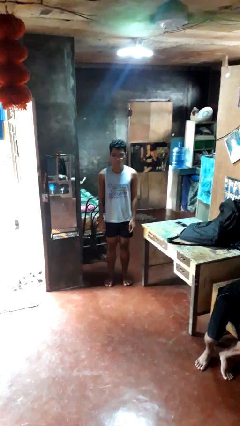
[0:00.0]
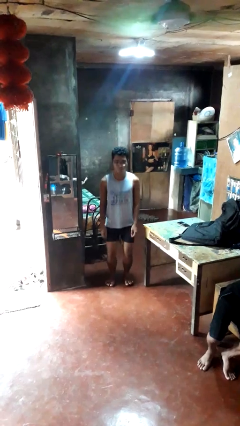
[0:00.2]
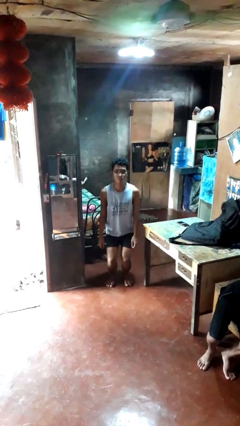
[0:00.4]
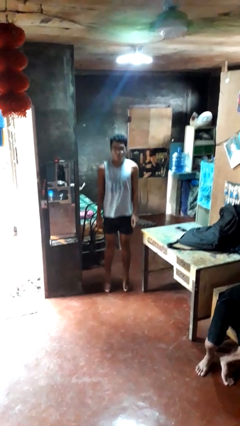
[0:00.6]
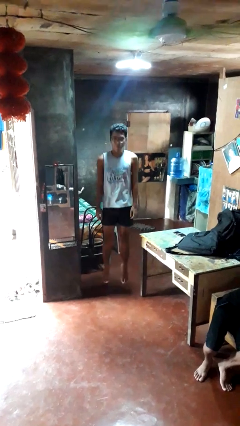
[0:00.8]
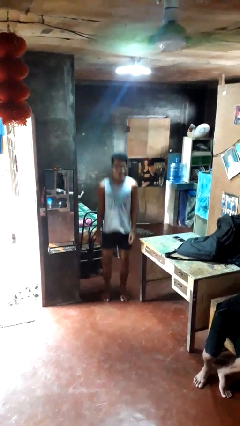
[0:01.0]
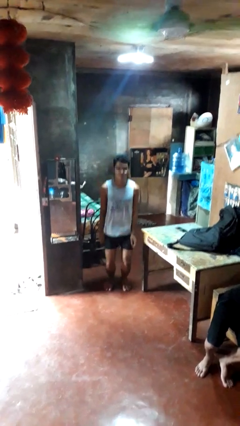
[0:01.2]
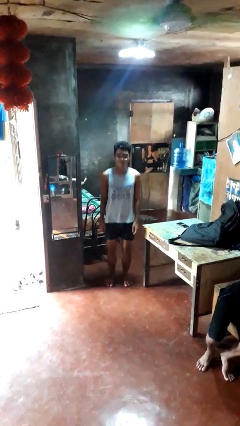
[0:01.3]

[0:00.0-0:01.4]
person jumps

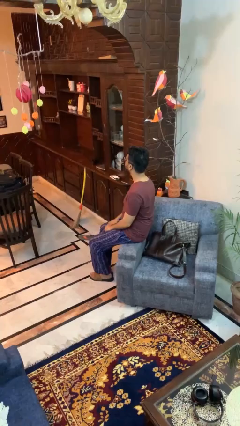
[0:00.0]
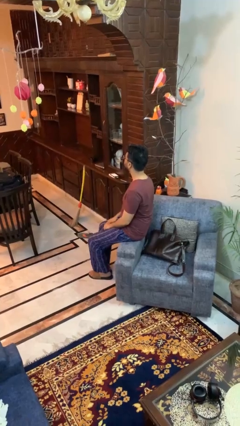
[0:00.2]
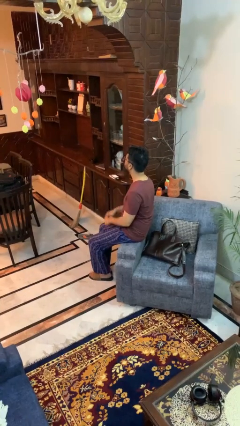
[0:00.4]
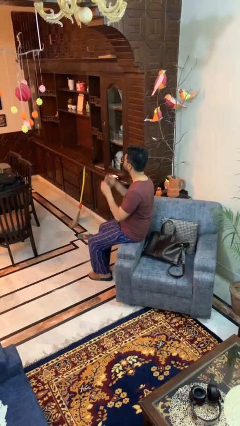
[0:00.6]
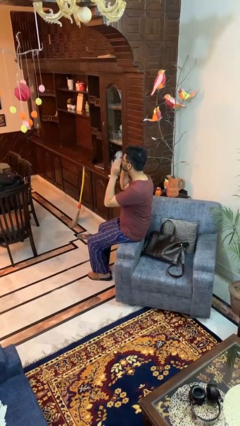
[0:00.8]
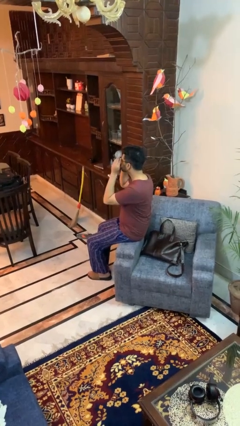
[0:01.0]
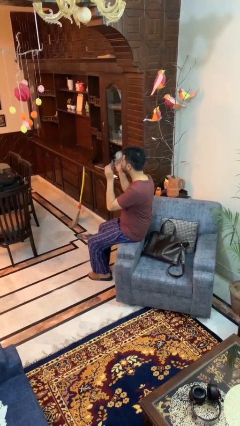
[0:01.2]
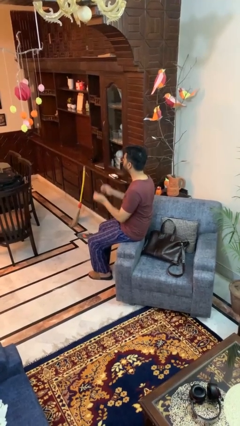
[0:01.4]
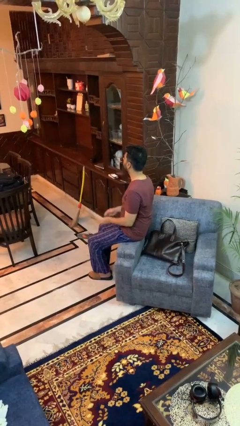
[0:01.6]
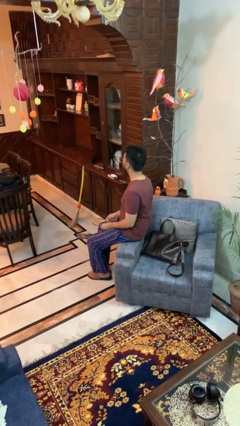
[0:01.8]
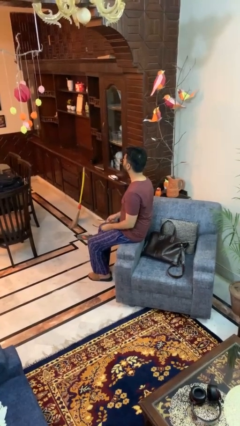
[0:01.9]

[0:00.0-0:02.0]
person takes off glasses

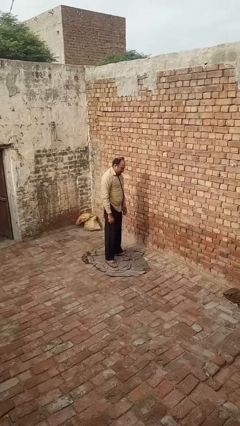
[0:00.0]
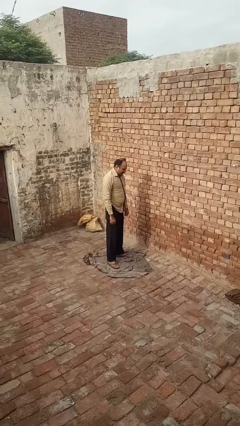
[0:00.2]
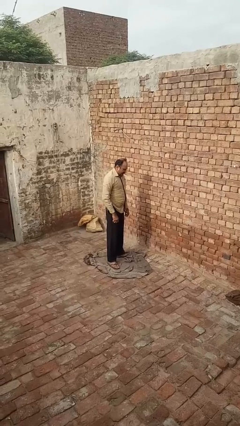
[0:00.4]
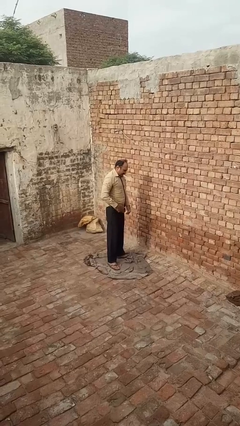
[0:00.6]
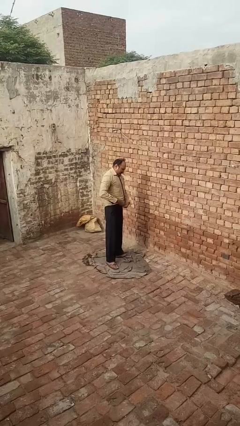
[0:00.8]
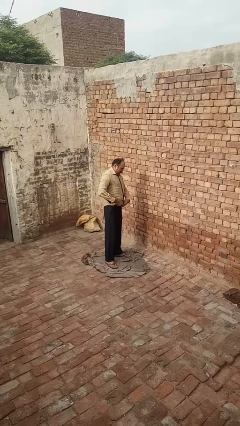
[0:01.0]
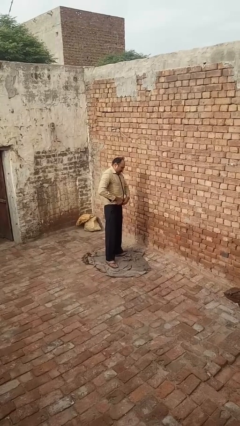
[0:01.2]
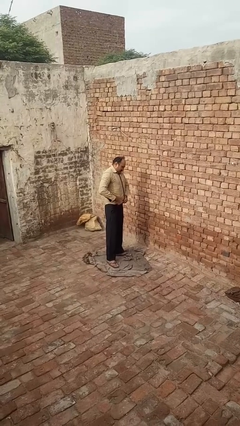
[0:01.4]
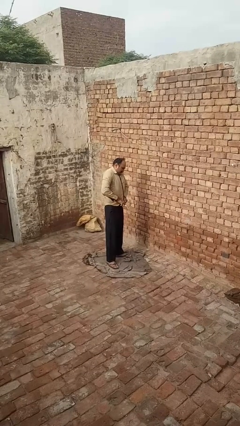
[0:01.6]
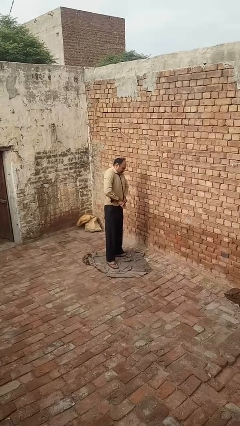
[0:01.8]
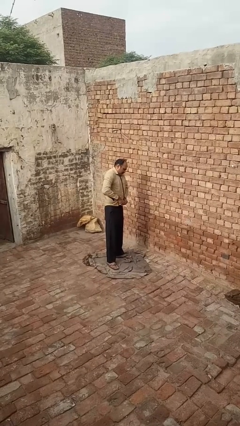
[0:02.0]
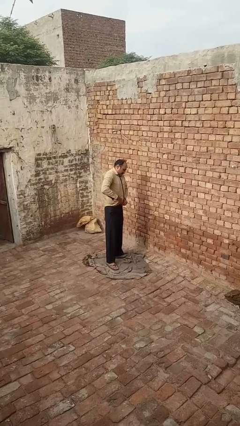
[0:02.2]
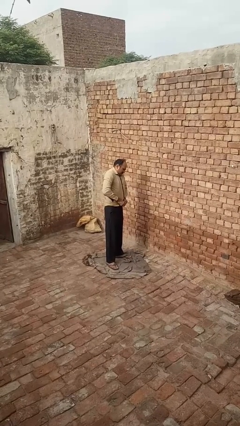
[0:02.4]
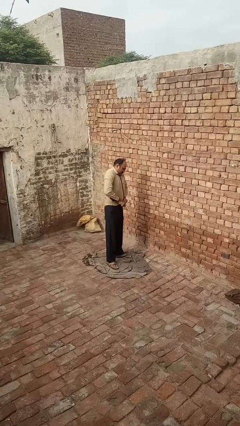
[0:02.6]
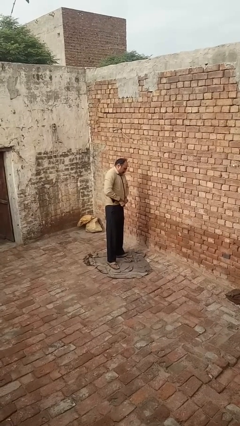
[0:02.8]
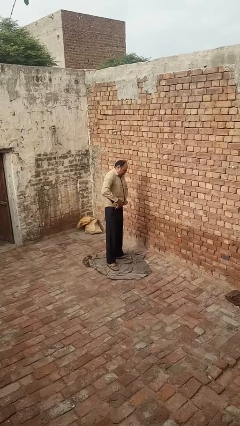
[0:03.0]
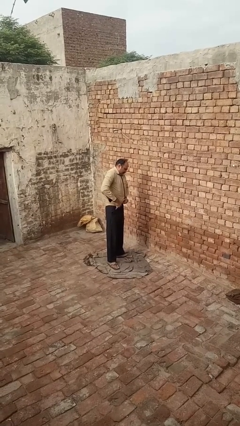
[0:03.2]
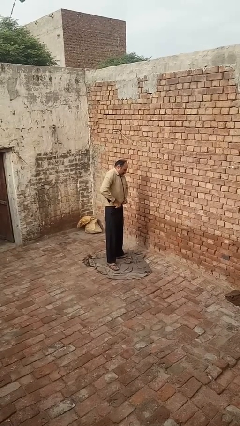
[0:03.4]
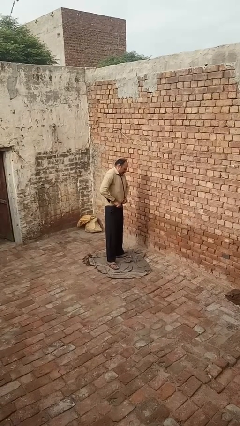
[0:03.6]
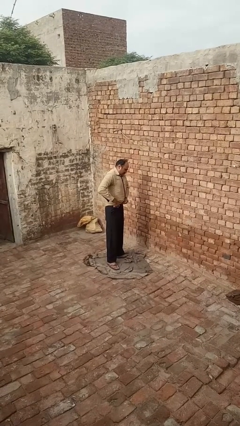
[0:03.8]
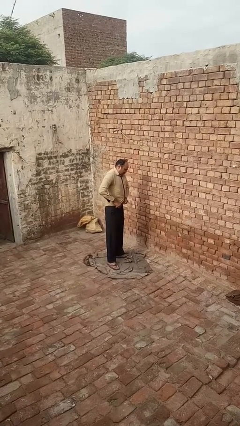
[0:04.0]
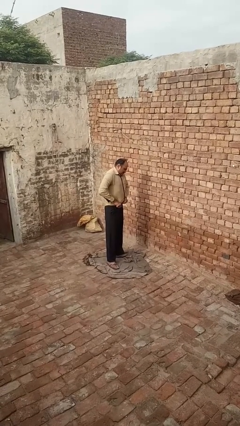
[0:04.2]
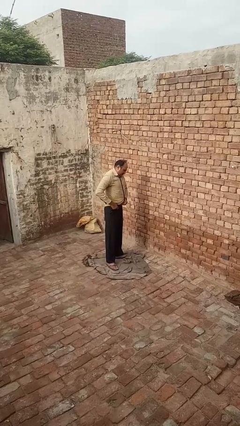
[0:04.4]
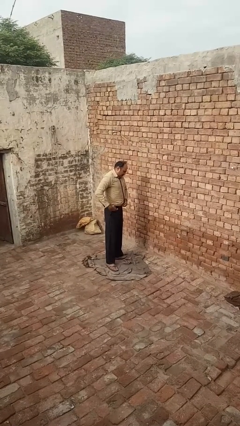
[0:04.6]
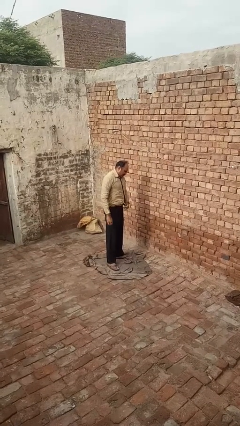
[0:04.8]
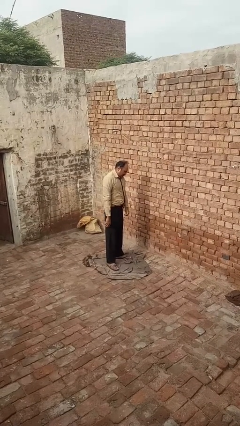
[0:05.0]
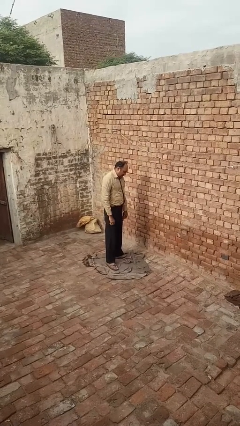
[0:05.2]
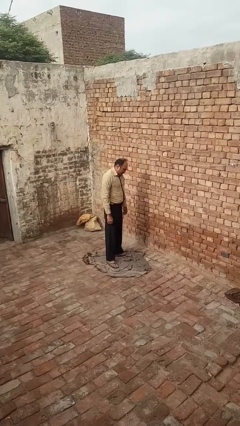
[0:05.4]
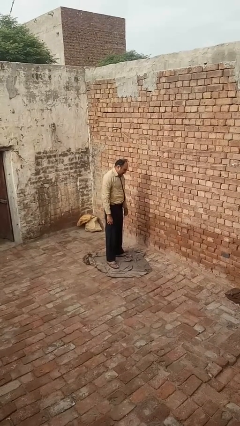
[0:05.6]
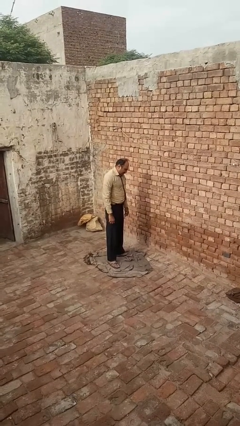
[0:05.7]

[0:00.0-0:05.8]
person tucks in shirt

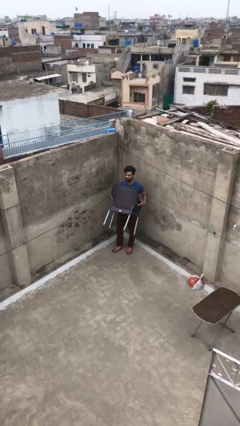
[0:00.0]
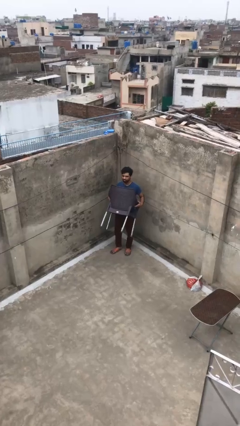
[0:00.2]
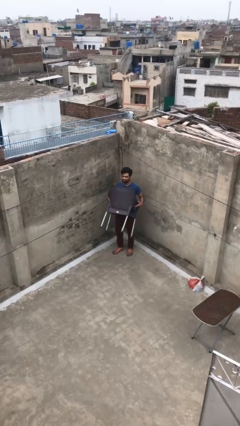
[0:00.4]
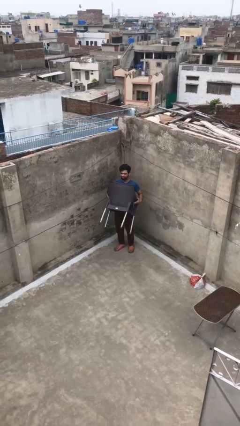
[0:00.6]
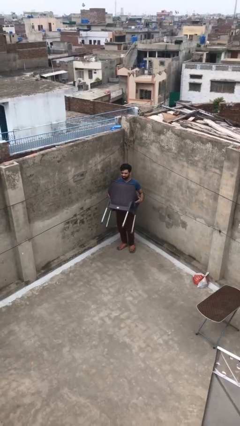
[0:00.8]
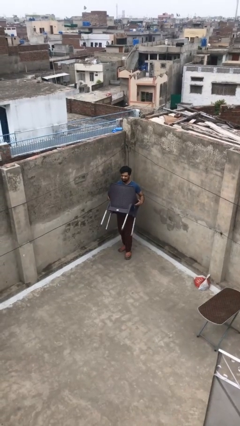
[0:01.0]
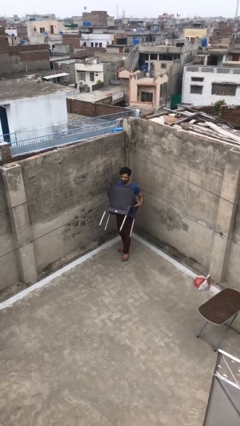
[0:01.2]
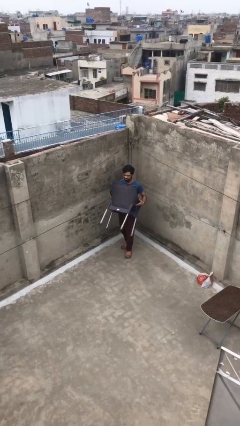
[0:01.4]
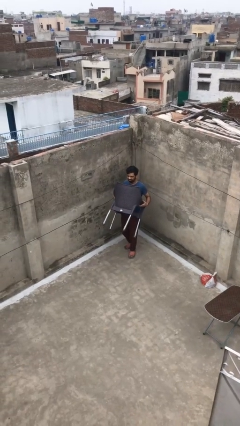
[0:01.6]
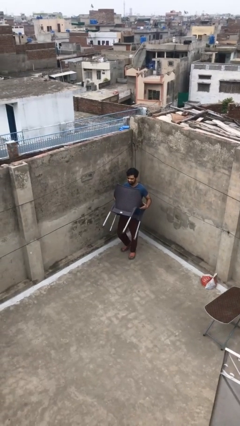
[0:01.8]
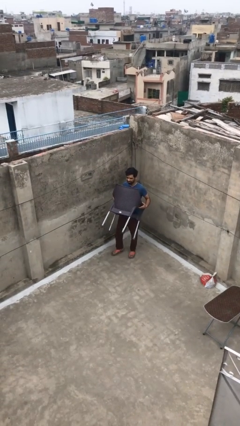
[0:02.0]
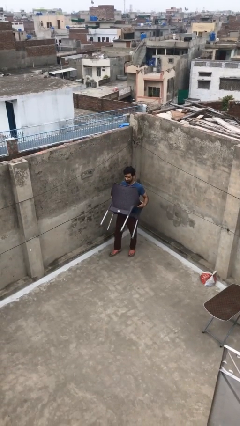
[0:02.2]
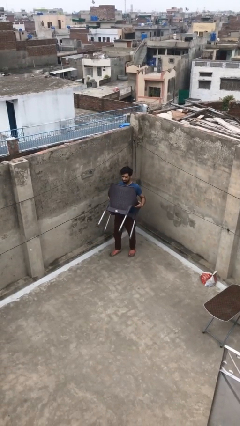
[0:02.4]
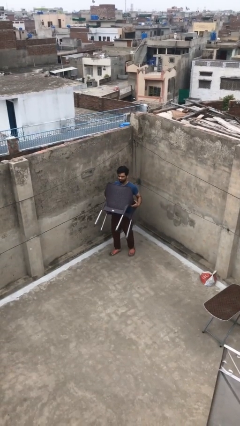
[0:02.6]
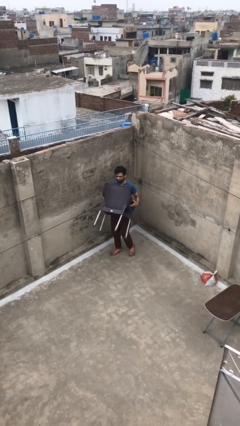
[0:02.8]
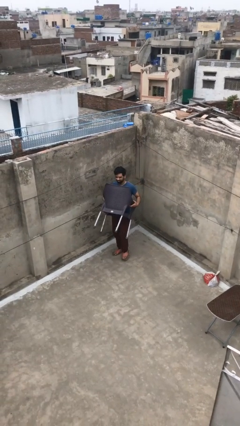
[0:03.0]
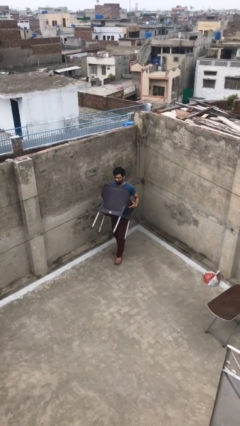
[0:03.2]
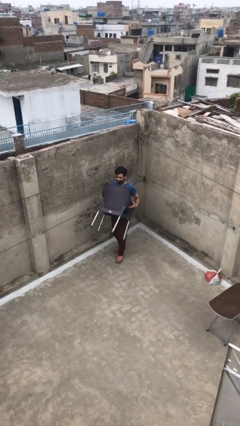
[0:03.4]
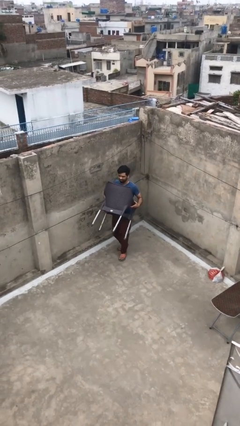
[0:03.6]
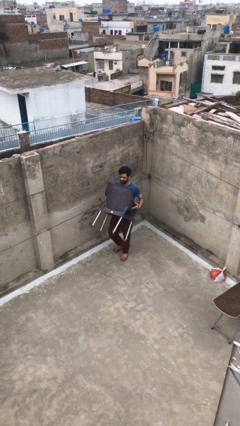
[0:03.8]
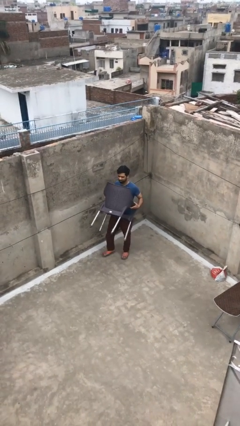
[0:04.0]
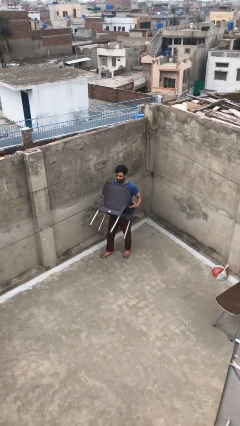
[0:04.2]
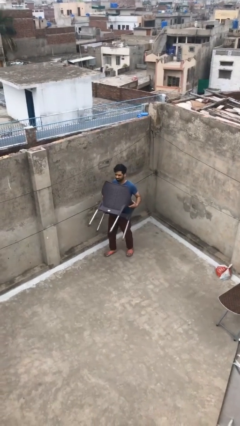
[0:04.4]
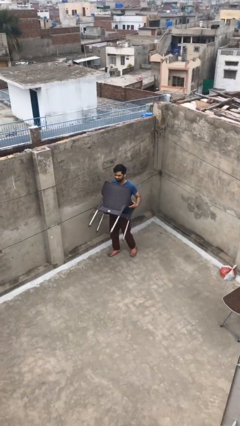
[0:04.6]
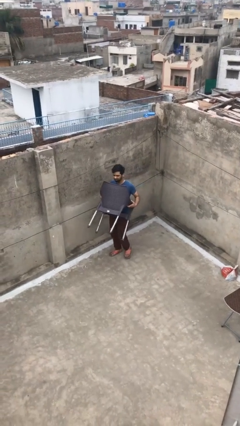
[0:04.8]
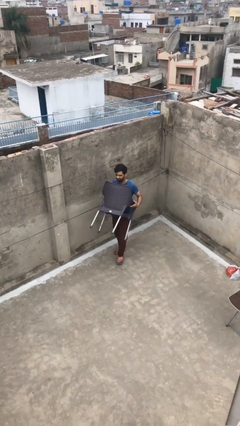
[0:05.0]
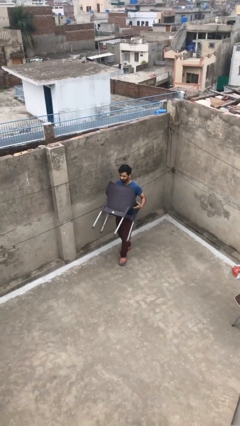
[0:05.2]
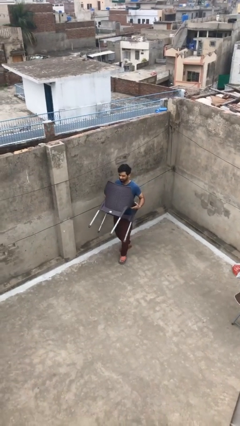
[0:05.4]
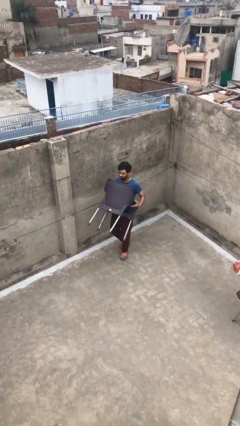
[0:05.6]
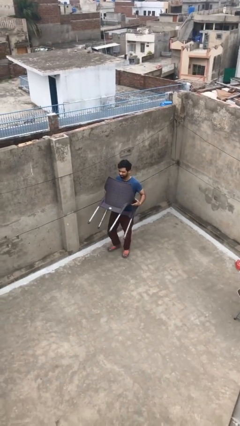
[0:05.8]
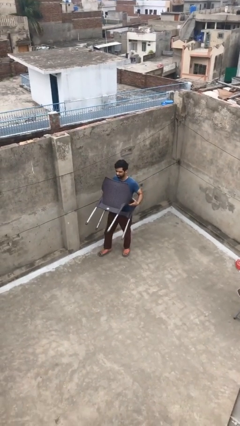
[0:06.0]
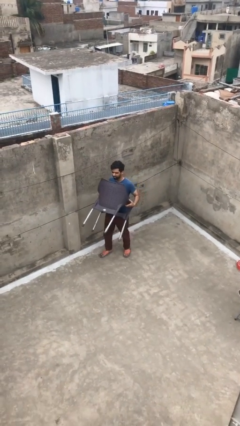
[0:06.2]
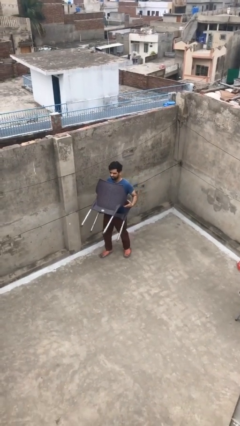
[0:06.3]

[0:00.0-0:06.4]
person carries heavy object

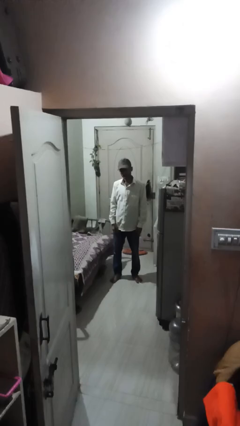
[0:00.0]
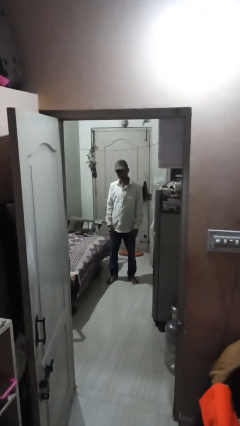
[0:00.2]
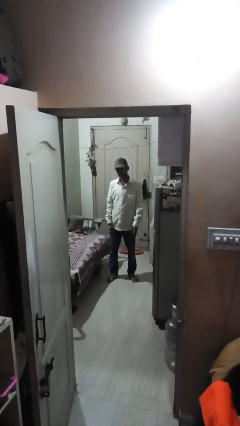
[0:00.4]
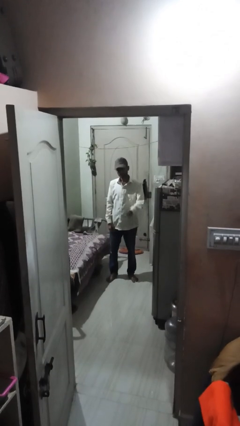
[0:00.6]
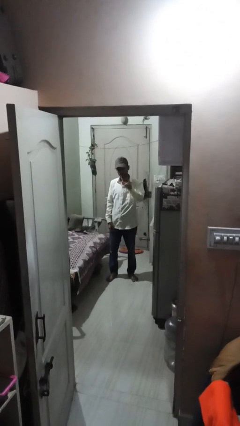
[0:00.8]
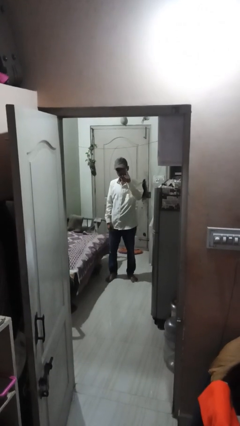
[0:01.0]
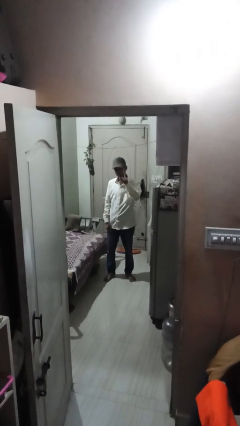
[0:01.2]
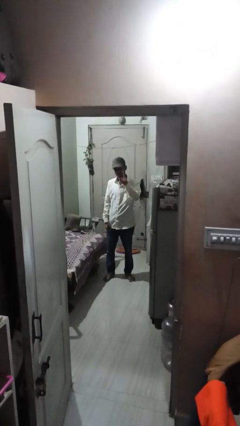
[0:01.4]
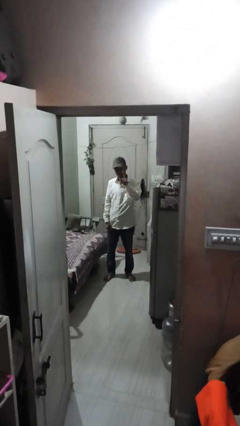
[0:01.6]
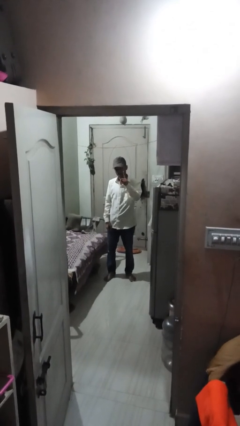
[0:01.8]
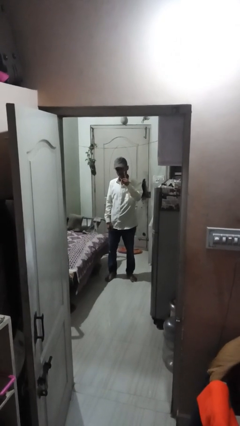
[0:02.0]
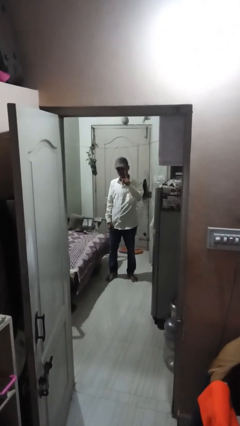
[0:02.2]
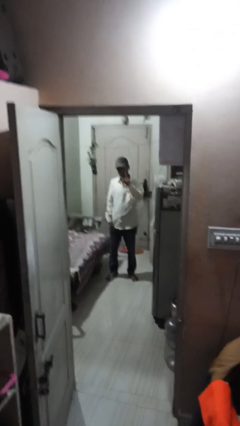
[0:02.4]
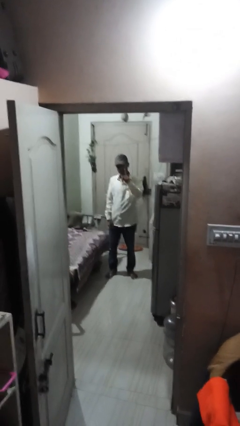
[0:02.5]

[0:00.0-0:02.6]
person gestures number one
